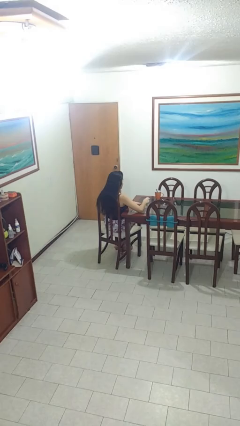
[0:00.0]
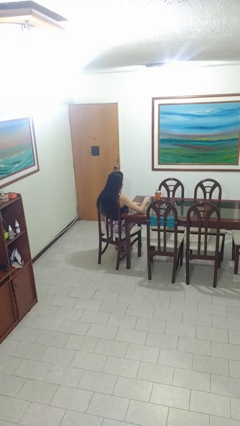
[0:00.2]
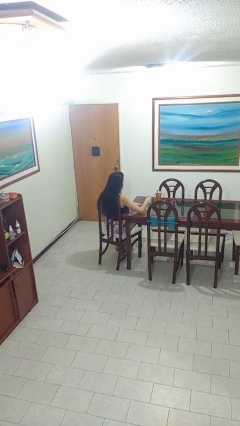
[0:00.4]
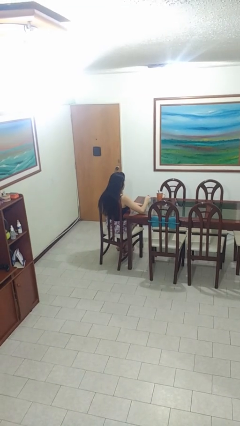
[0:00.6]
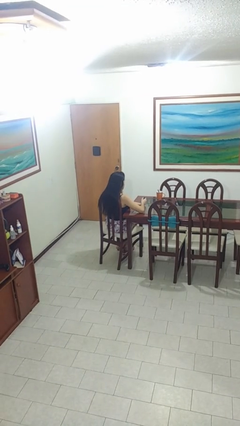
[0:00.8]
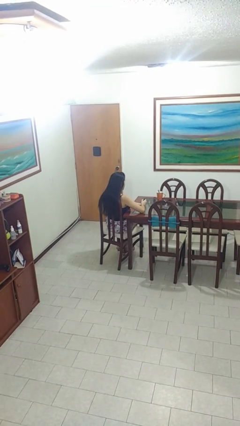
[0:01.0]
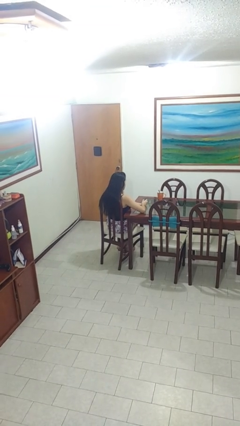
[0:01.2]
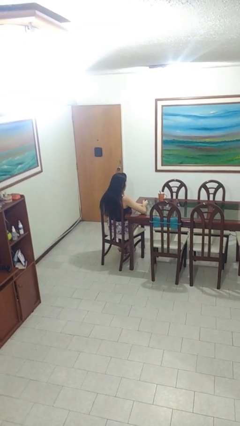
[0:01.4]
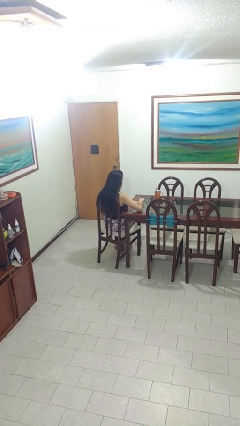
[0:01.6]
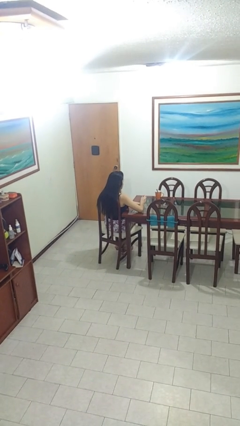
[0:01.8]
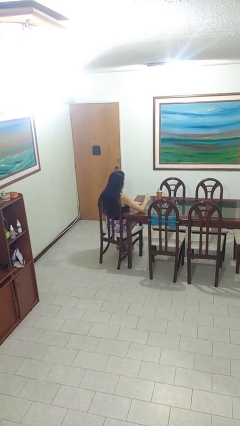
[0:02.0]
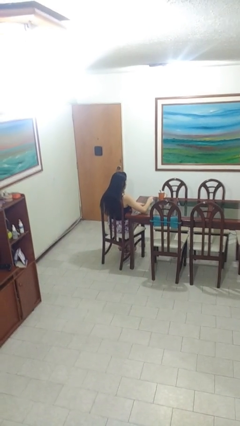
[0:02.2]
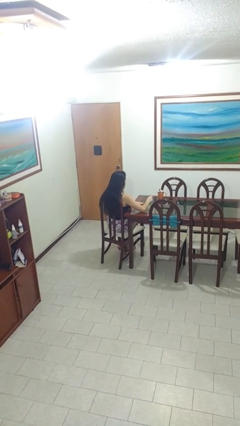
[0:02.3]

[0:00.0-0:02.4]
person paints fingernails

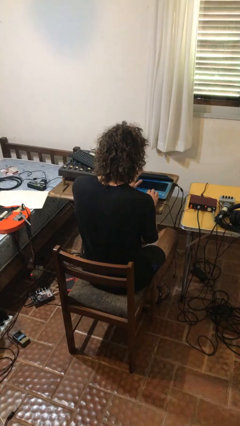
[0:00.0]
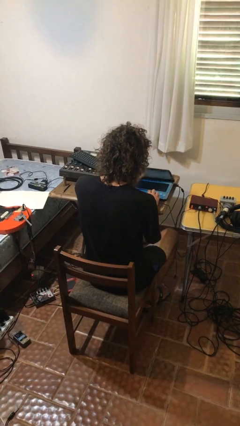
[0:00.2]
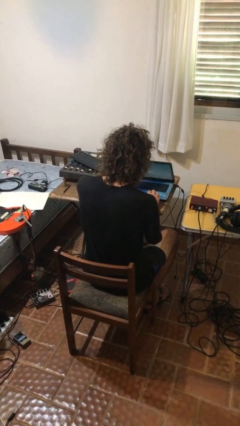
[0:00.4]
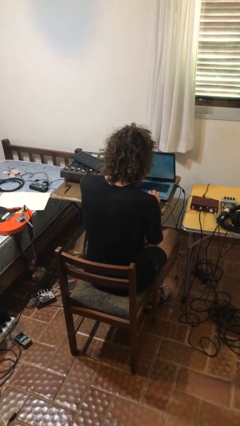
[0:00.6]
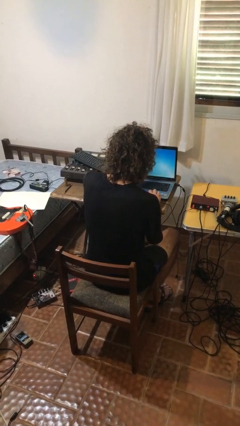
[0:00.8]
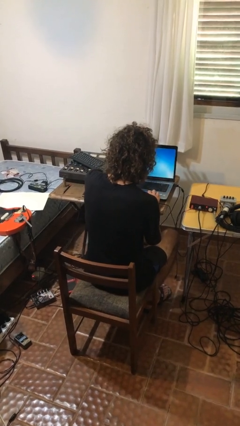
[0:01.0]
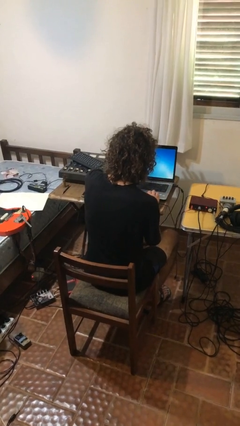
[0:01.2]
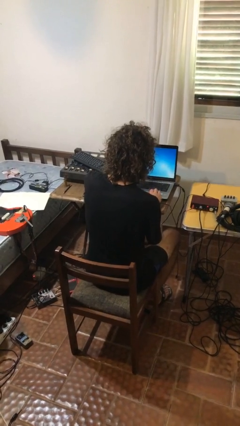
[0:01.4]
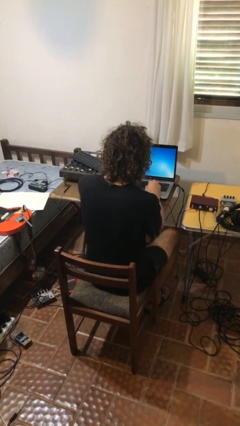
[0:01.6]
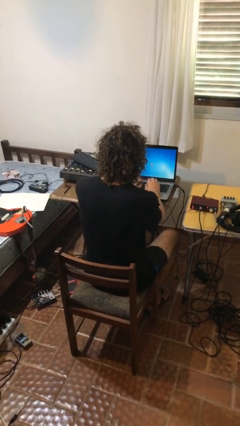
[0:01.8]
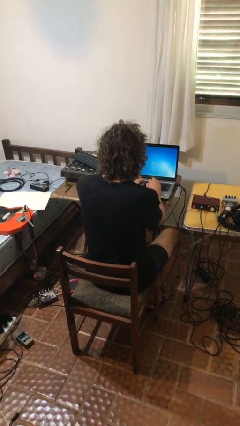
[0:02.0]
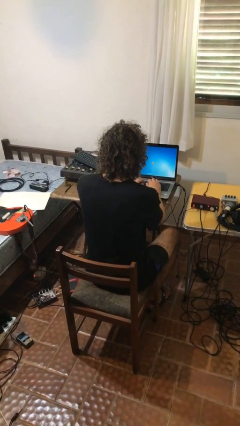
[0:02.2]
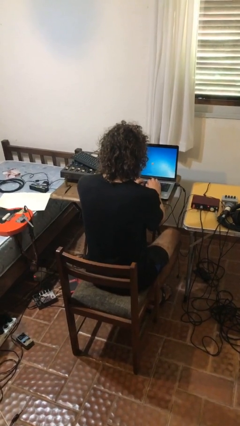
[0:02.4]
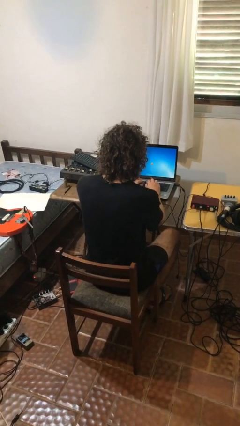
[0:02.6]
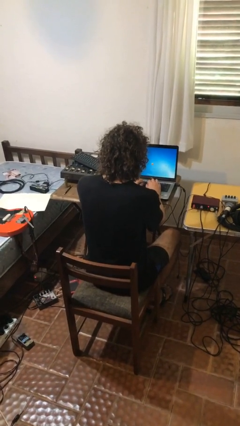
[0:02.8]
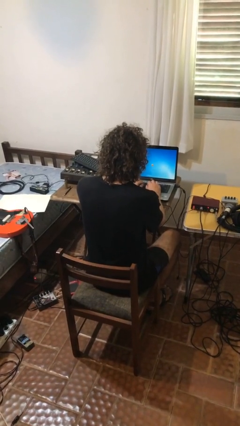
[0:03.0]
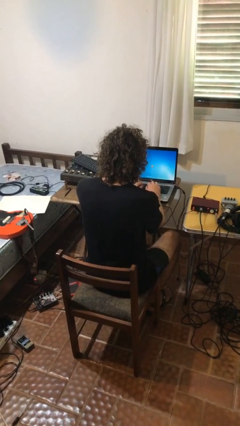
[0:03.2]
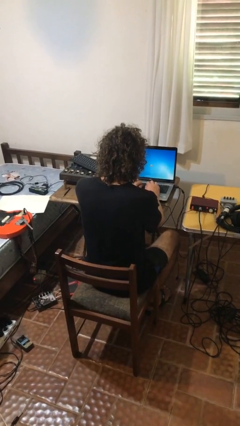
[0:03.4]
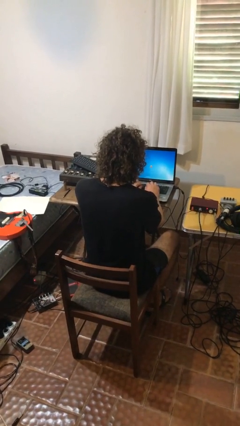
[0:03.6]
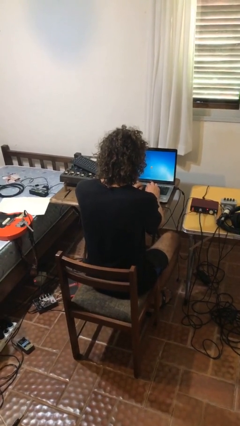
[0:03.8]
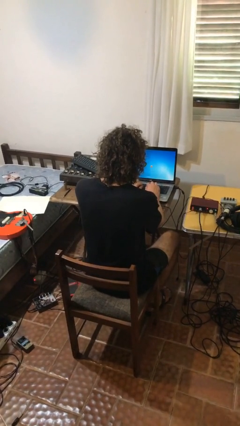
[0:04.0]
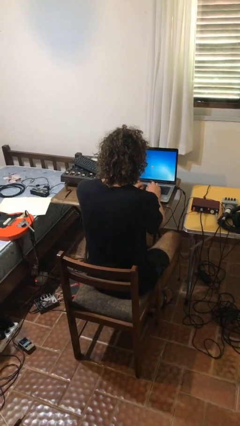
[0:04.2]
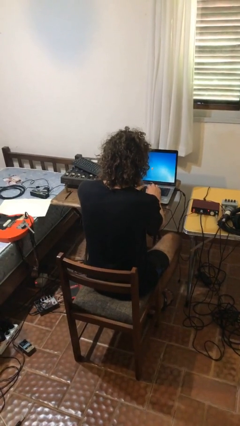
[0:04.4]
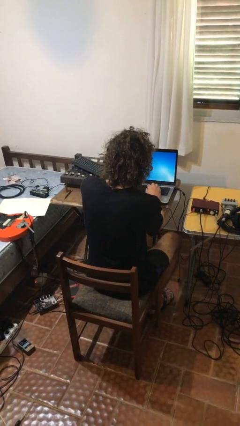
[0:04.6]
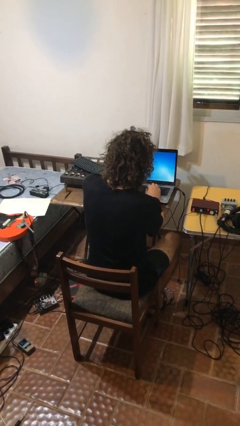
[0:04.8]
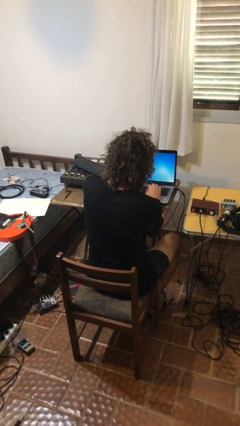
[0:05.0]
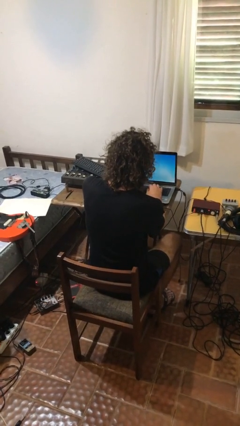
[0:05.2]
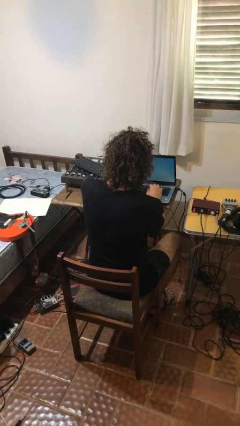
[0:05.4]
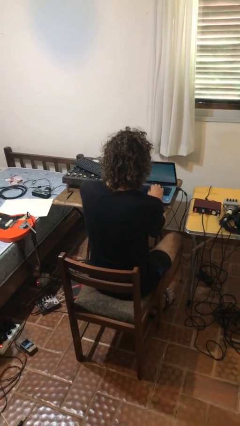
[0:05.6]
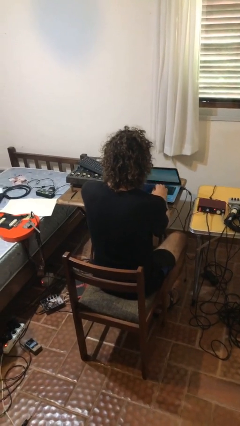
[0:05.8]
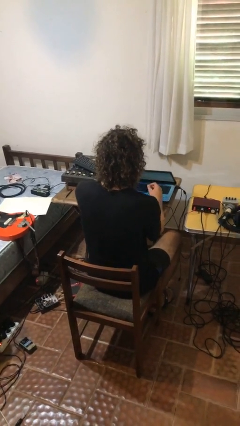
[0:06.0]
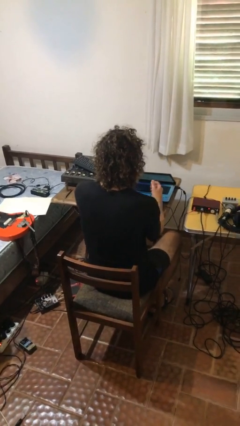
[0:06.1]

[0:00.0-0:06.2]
person interacts with laptop

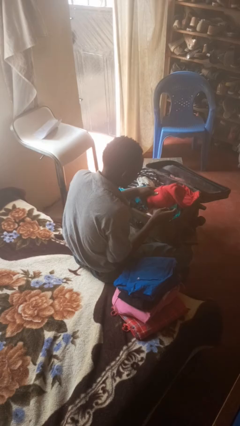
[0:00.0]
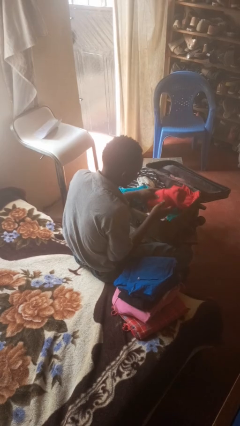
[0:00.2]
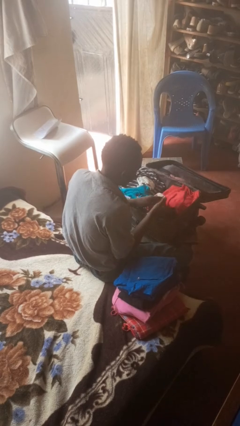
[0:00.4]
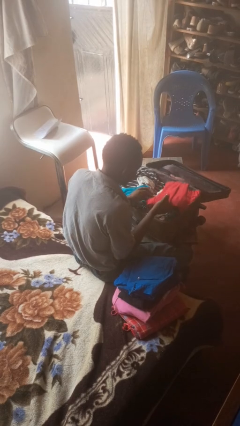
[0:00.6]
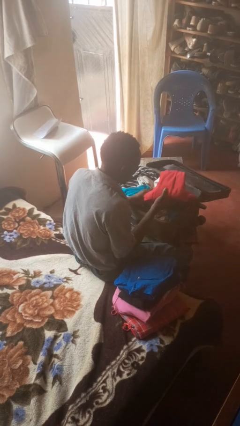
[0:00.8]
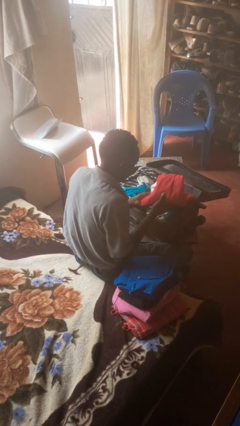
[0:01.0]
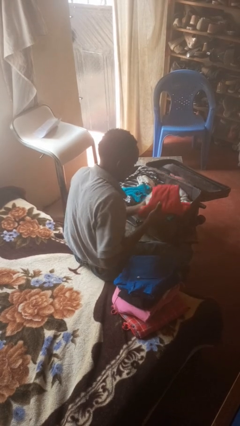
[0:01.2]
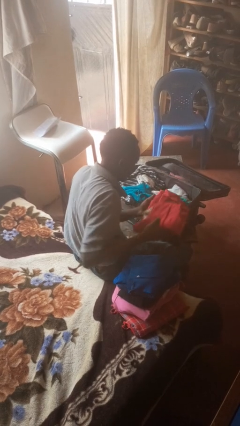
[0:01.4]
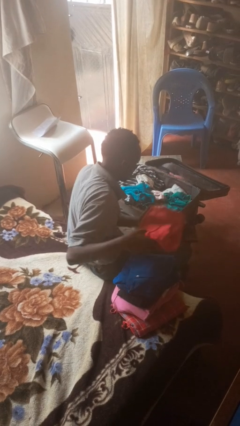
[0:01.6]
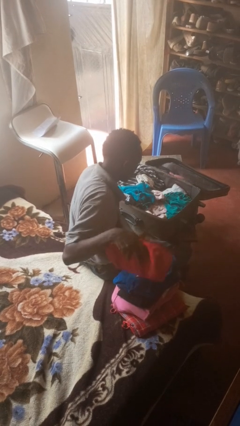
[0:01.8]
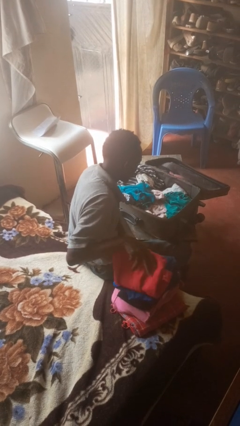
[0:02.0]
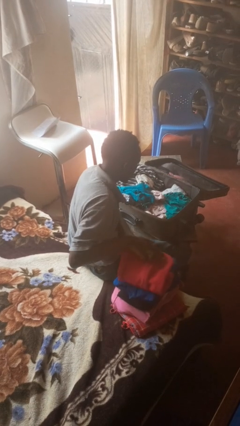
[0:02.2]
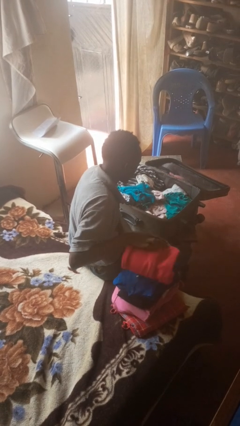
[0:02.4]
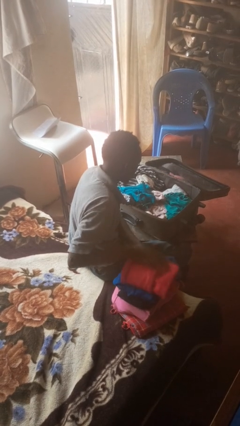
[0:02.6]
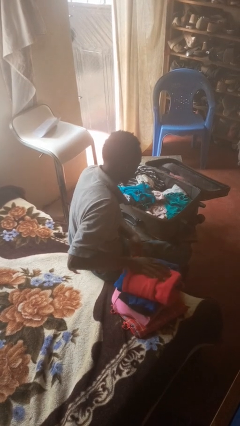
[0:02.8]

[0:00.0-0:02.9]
person unloads clothes from suitcase

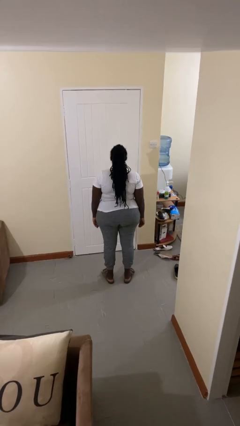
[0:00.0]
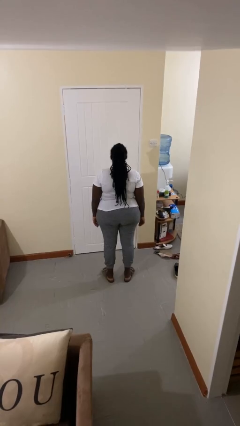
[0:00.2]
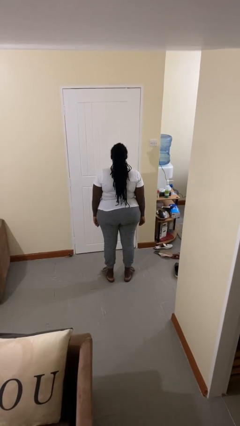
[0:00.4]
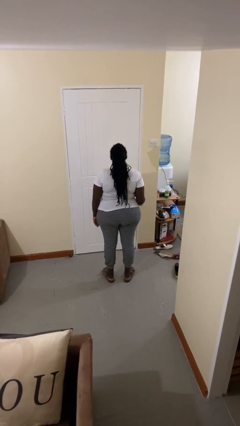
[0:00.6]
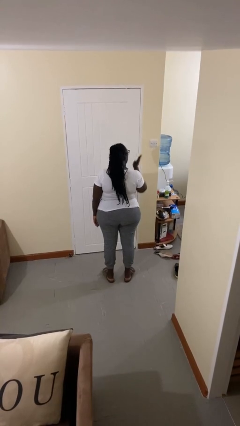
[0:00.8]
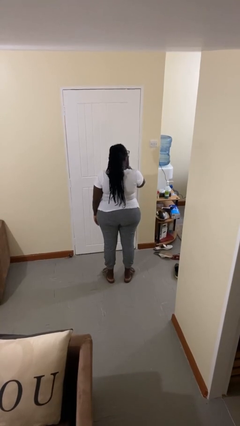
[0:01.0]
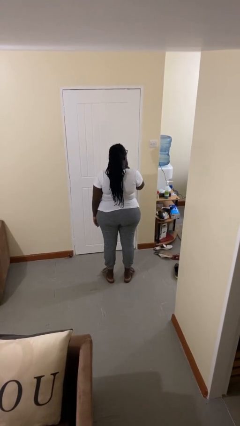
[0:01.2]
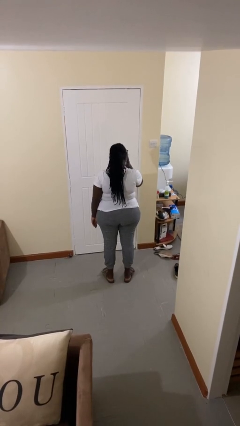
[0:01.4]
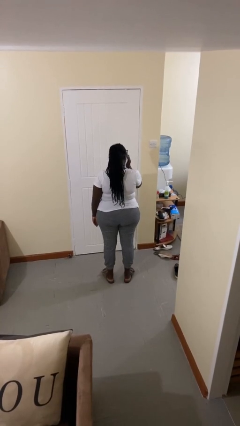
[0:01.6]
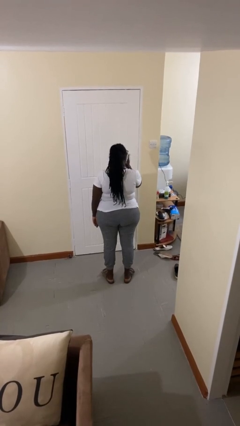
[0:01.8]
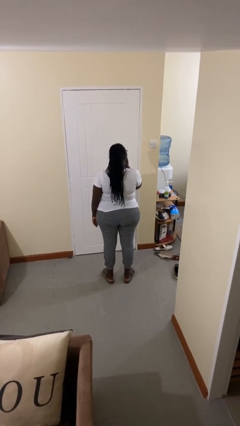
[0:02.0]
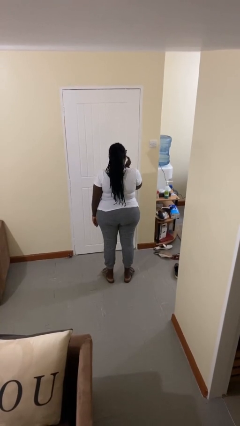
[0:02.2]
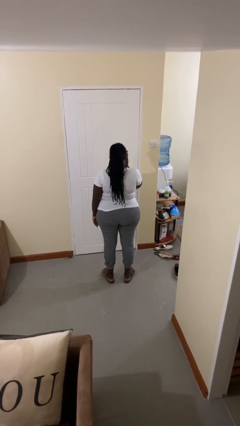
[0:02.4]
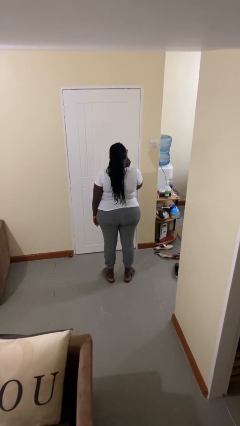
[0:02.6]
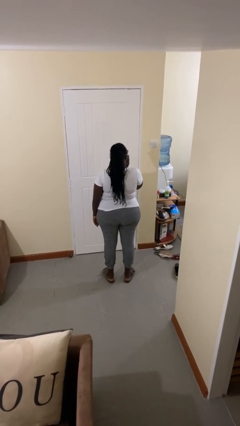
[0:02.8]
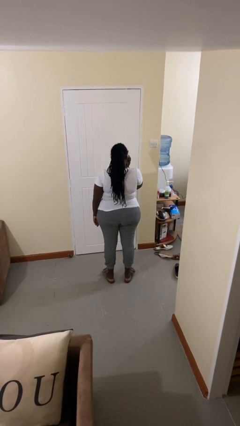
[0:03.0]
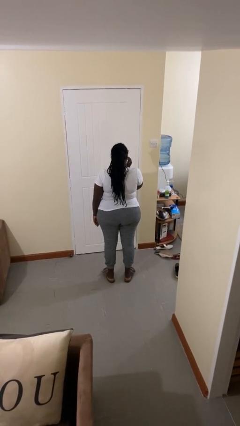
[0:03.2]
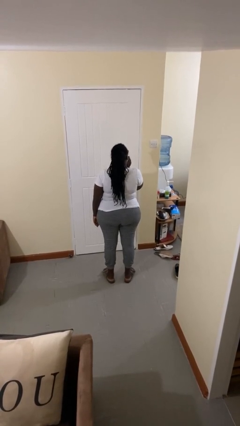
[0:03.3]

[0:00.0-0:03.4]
person swats bug

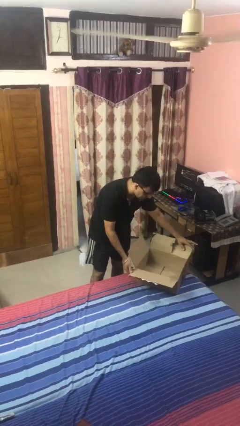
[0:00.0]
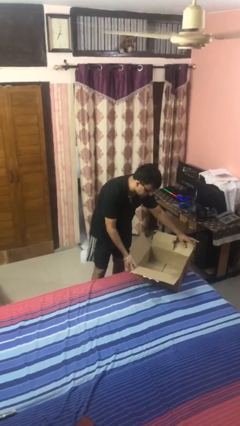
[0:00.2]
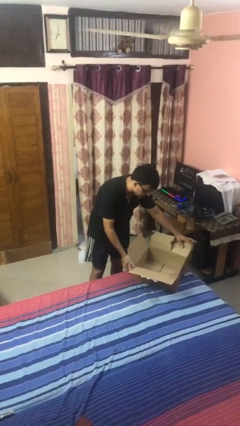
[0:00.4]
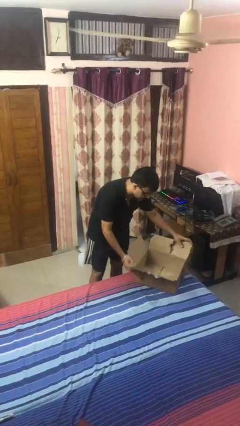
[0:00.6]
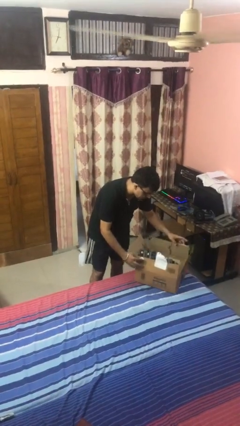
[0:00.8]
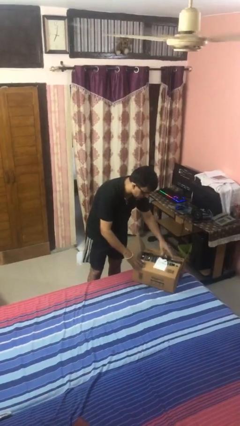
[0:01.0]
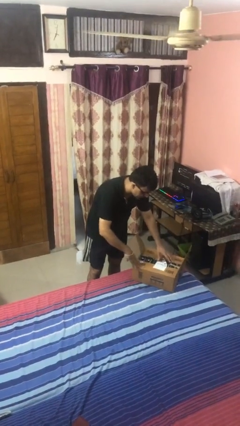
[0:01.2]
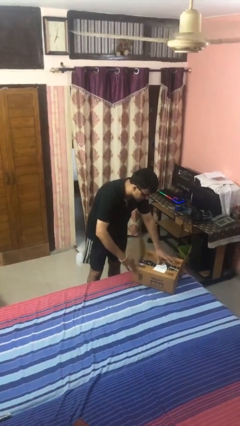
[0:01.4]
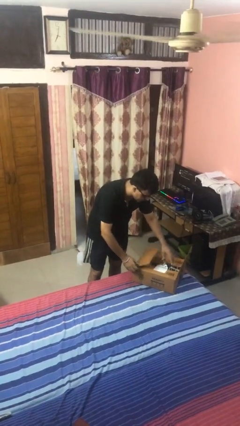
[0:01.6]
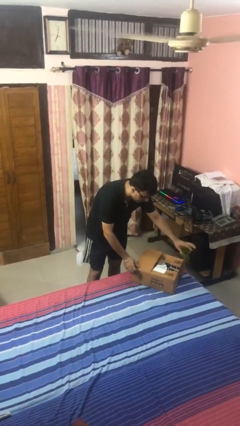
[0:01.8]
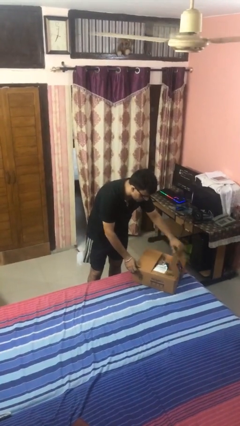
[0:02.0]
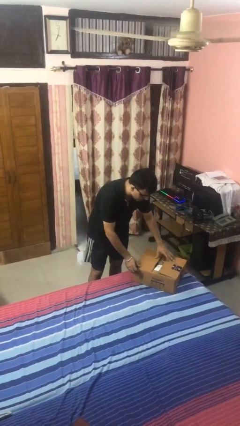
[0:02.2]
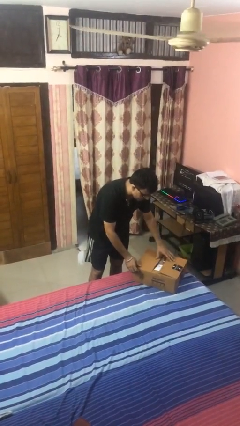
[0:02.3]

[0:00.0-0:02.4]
person closes box

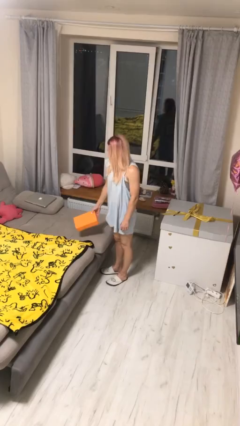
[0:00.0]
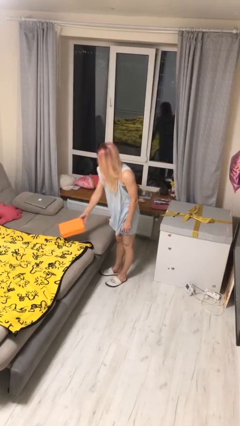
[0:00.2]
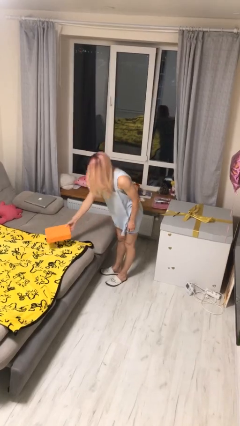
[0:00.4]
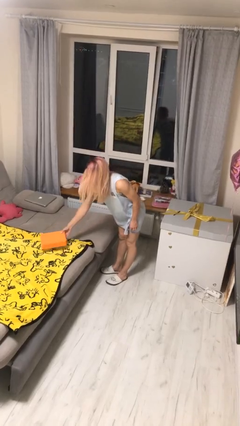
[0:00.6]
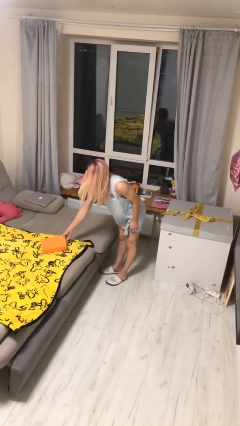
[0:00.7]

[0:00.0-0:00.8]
person puts down object on bed
